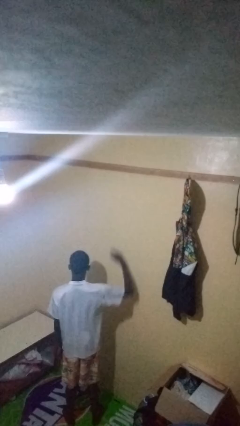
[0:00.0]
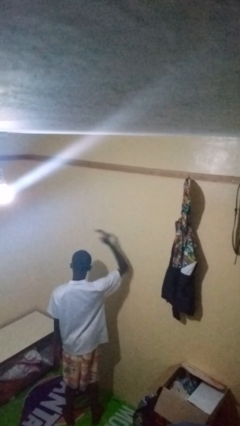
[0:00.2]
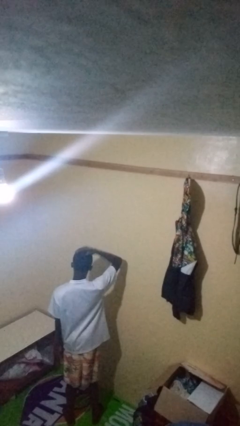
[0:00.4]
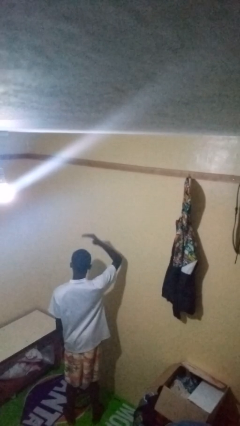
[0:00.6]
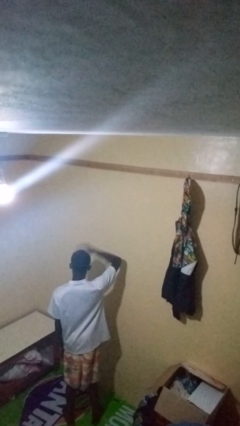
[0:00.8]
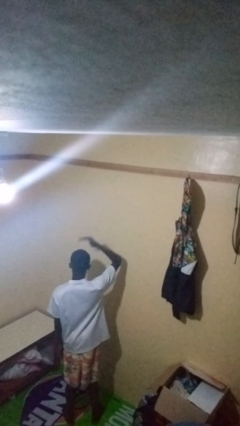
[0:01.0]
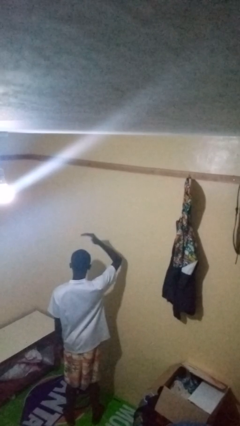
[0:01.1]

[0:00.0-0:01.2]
person pats head

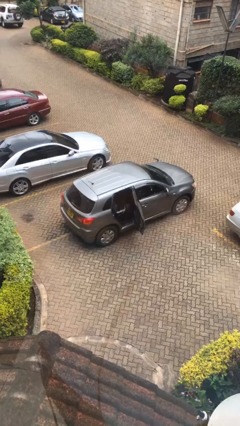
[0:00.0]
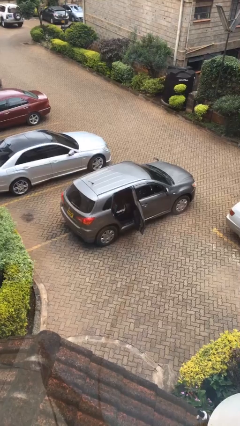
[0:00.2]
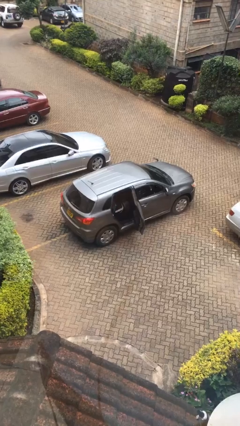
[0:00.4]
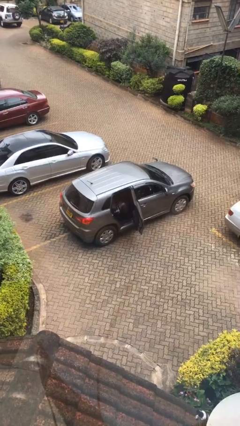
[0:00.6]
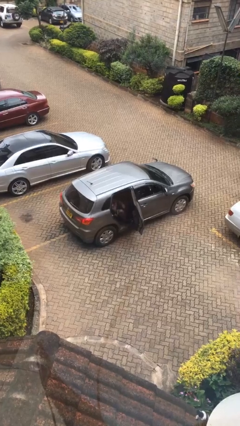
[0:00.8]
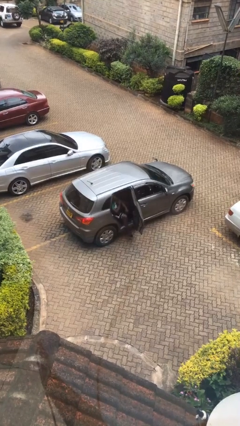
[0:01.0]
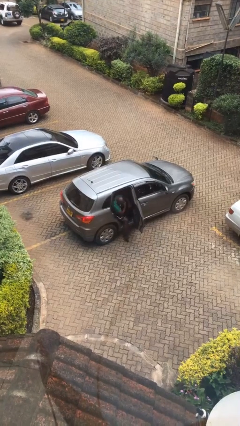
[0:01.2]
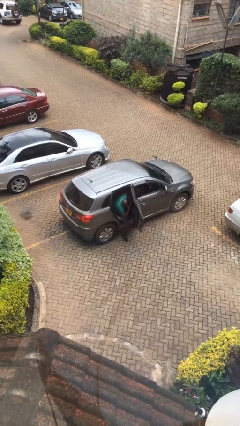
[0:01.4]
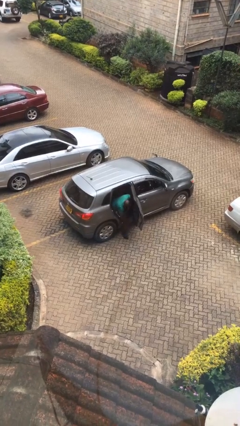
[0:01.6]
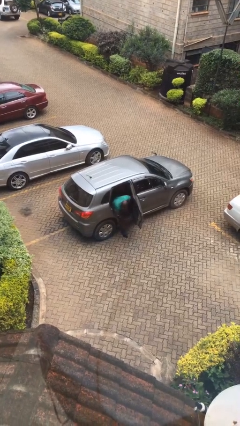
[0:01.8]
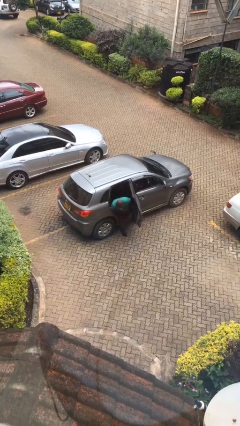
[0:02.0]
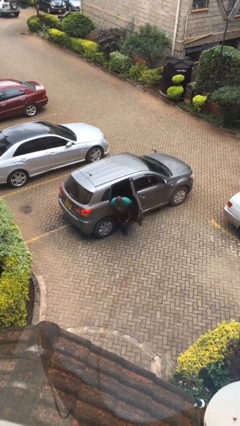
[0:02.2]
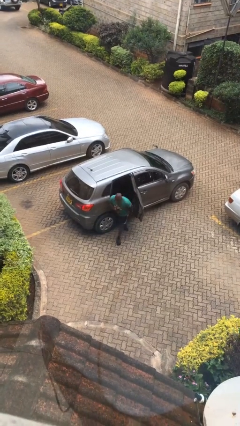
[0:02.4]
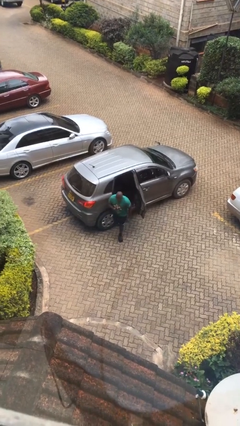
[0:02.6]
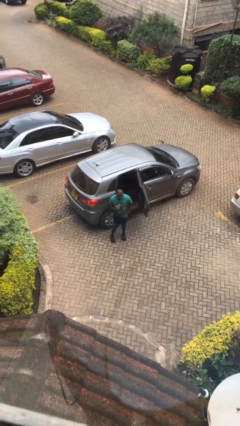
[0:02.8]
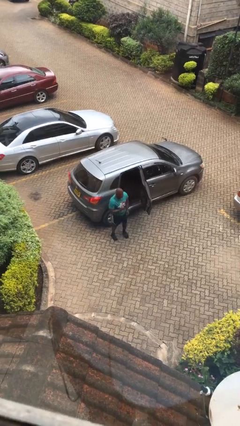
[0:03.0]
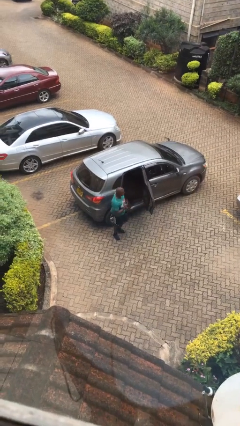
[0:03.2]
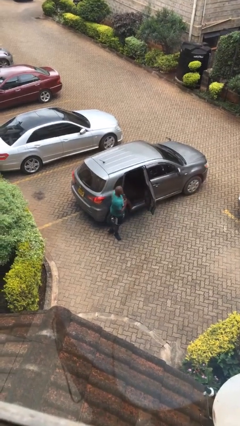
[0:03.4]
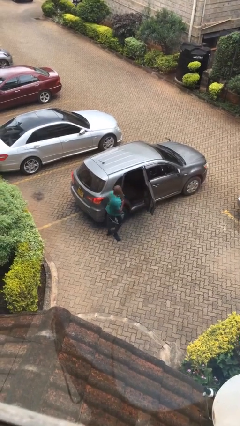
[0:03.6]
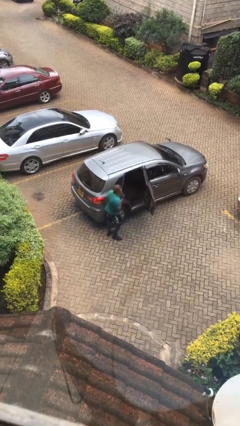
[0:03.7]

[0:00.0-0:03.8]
person exits car

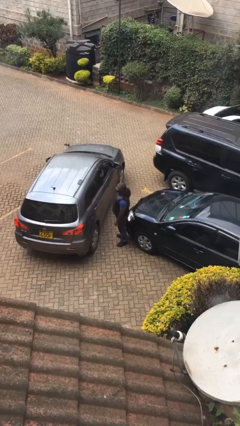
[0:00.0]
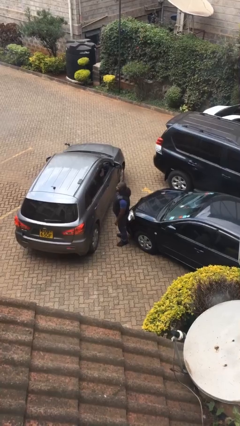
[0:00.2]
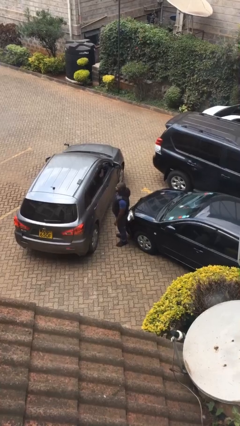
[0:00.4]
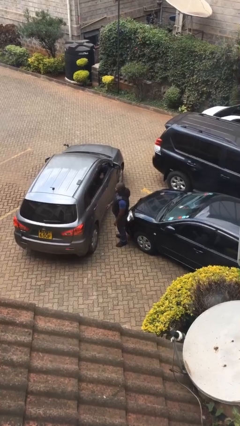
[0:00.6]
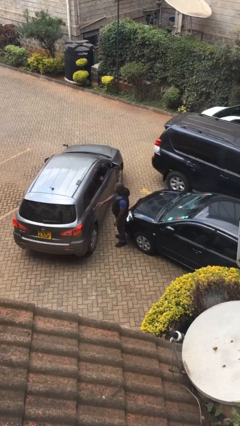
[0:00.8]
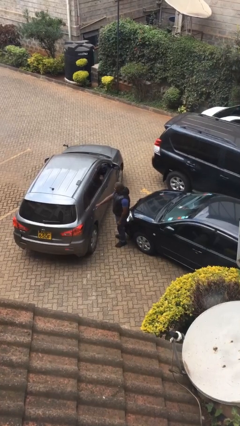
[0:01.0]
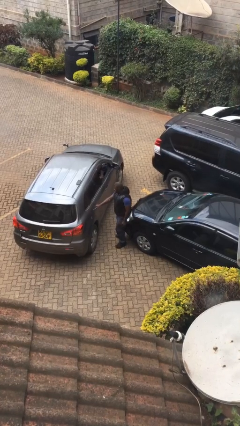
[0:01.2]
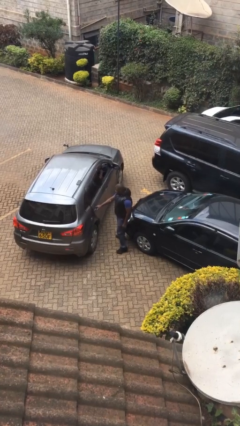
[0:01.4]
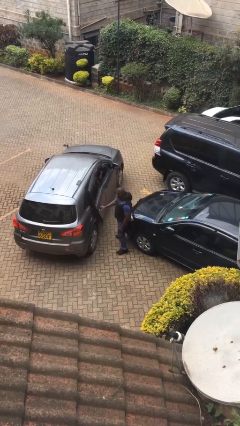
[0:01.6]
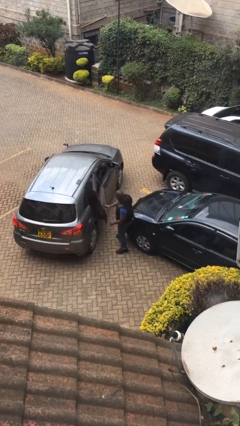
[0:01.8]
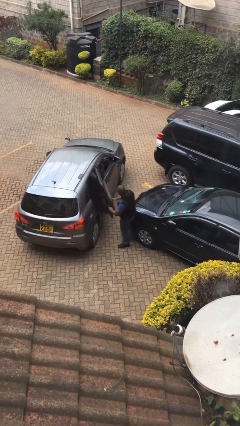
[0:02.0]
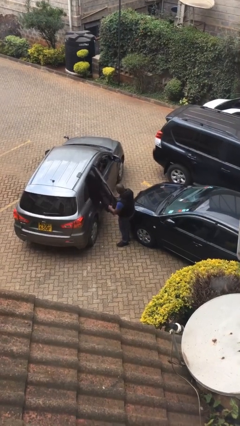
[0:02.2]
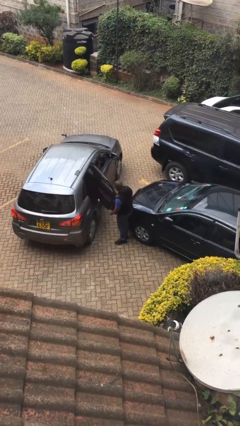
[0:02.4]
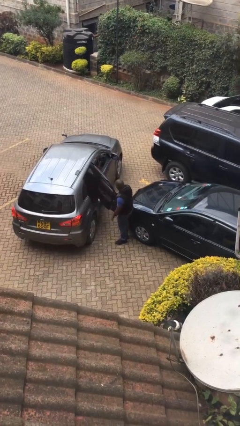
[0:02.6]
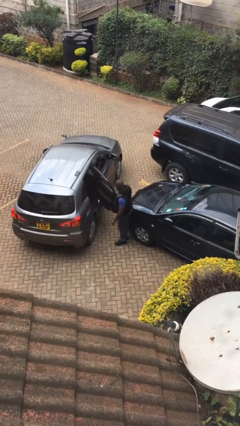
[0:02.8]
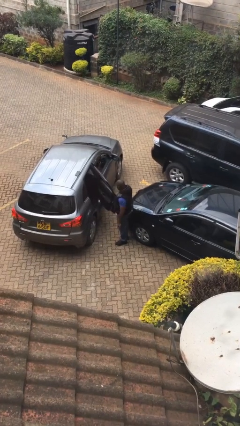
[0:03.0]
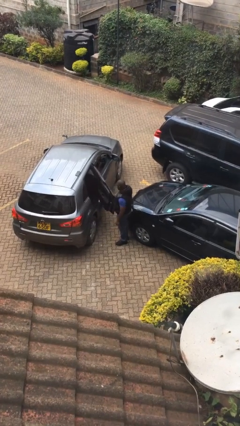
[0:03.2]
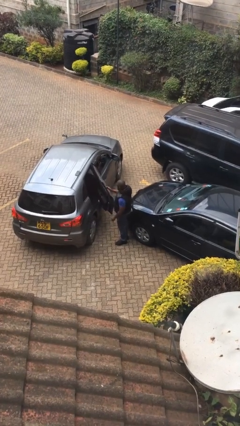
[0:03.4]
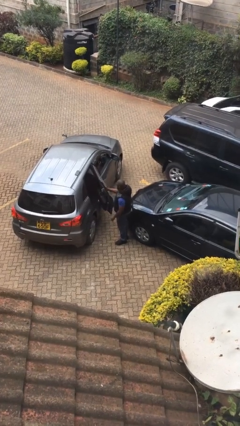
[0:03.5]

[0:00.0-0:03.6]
person opens car door

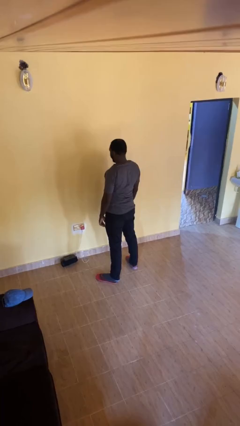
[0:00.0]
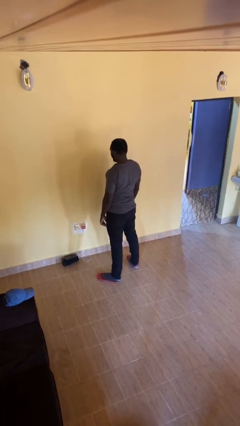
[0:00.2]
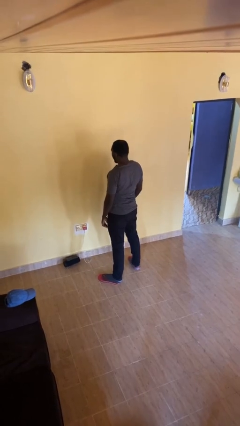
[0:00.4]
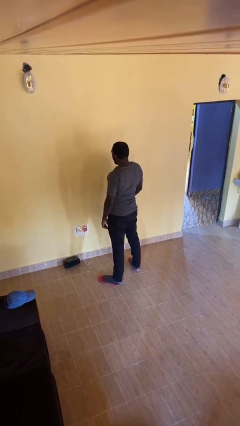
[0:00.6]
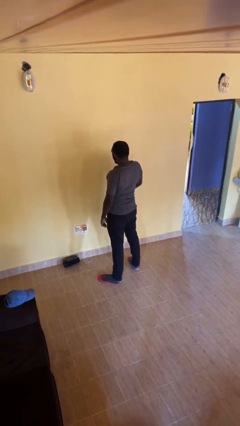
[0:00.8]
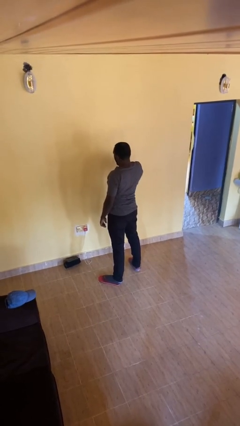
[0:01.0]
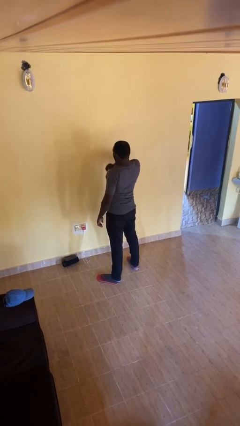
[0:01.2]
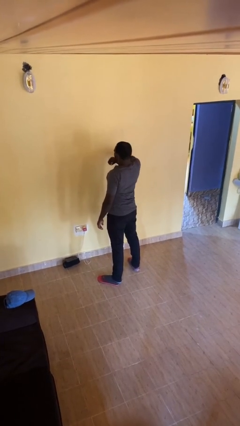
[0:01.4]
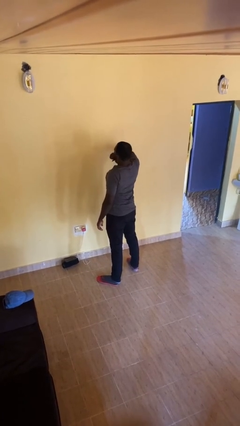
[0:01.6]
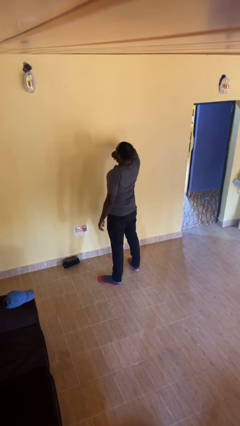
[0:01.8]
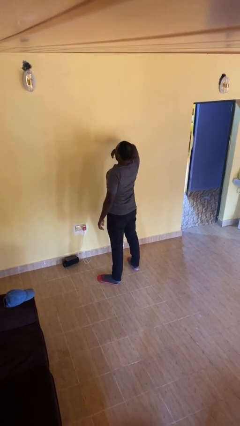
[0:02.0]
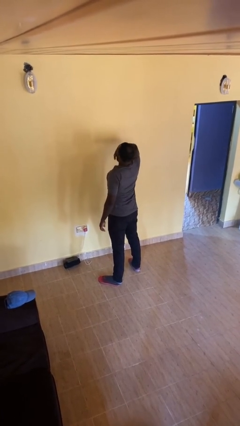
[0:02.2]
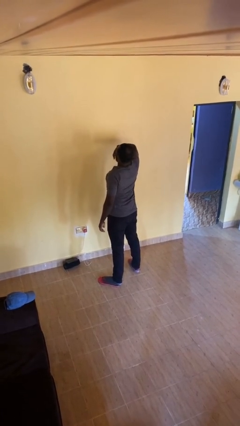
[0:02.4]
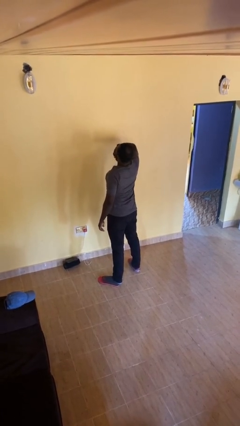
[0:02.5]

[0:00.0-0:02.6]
person yawns

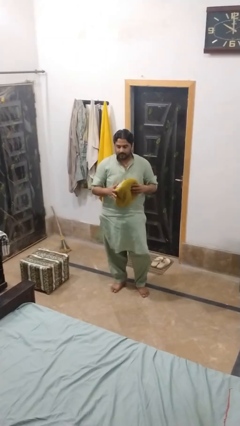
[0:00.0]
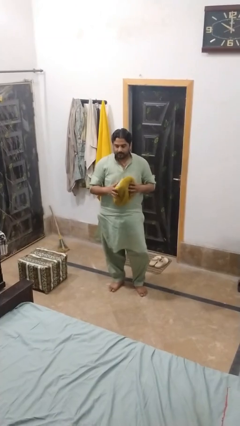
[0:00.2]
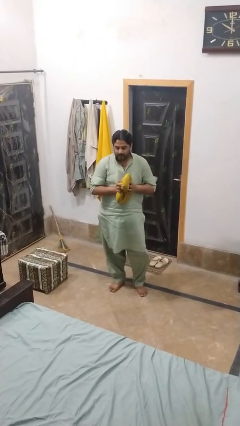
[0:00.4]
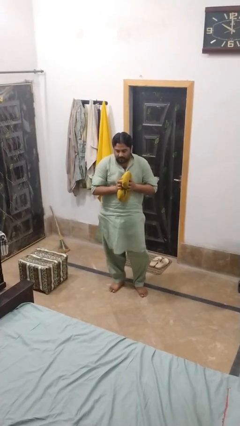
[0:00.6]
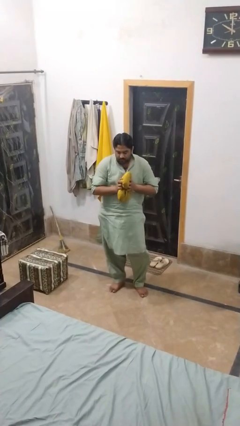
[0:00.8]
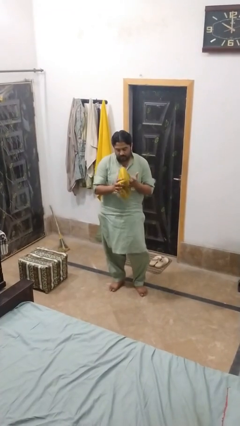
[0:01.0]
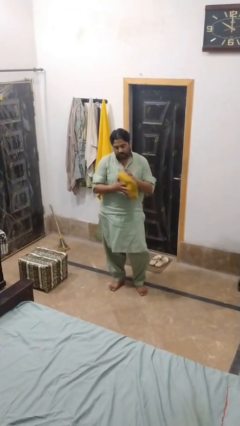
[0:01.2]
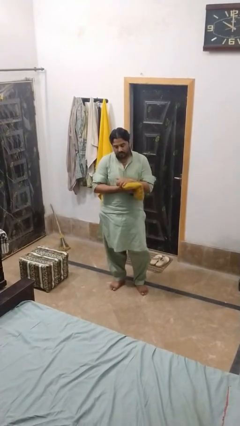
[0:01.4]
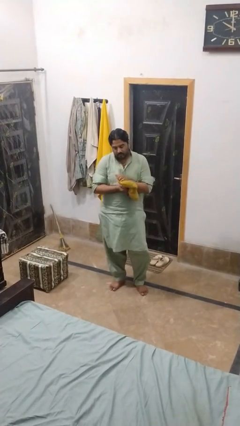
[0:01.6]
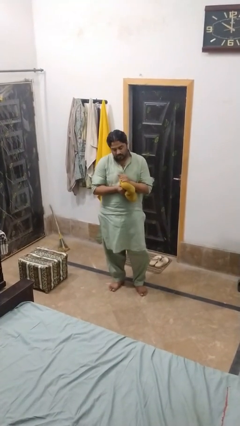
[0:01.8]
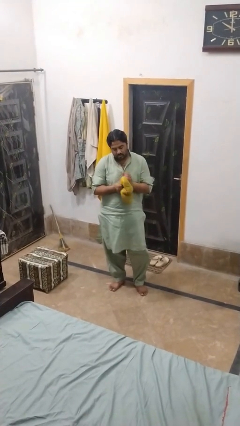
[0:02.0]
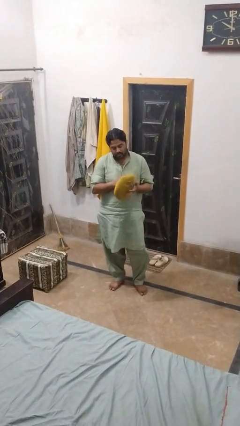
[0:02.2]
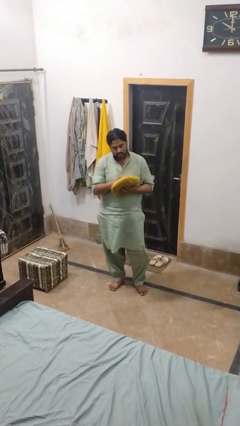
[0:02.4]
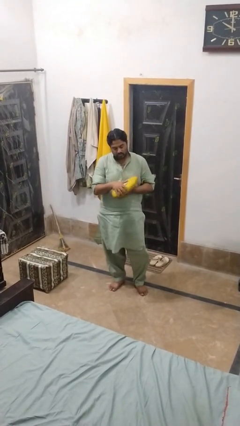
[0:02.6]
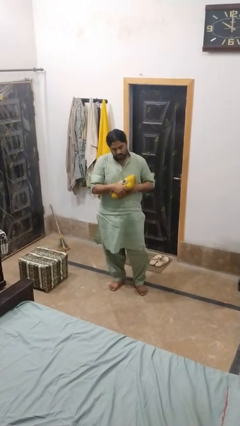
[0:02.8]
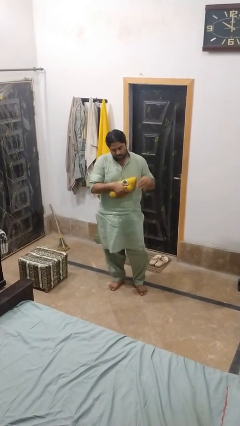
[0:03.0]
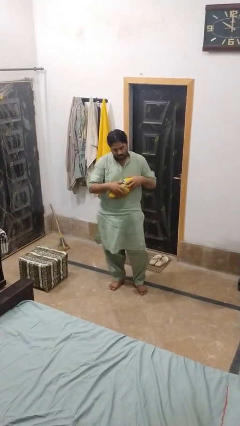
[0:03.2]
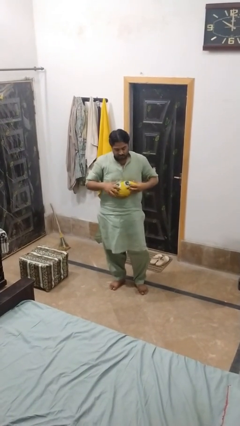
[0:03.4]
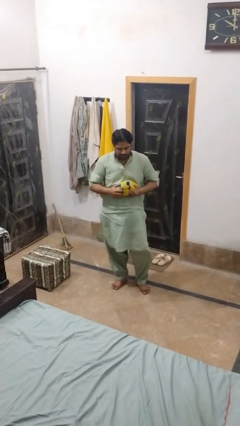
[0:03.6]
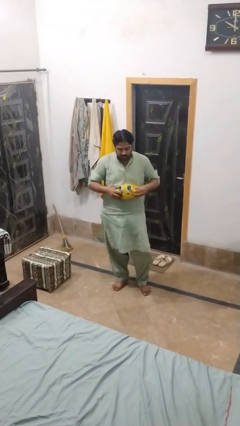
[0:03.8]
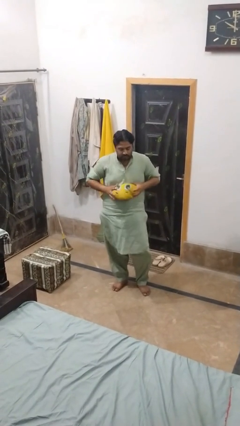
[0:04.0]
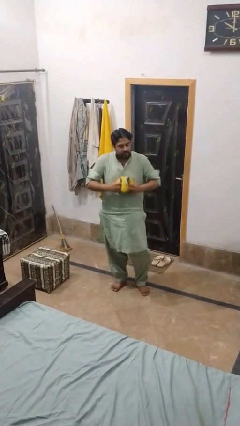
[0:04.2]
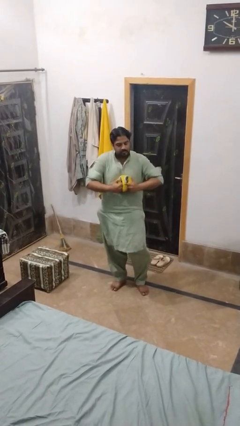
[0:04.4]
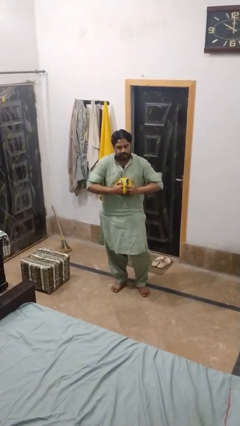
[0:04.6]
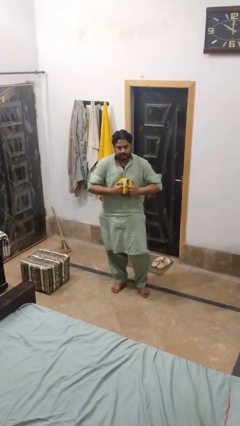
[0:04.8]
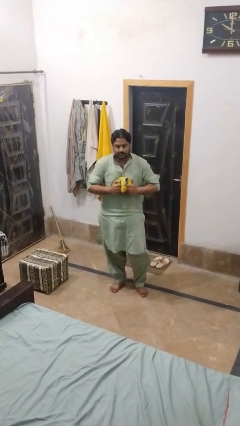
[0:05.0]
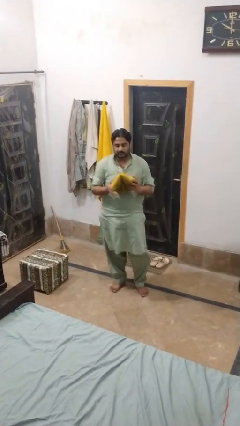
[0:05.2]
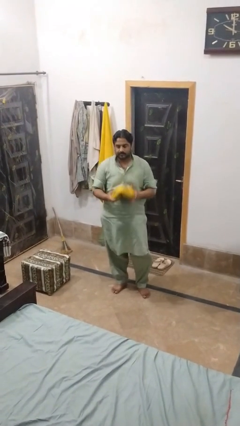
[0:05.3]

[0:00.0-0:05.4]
person squeezes object

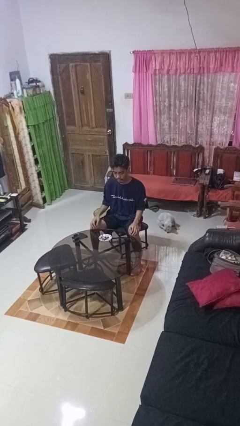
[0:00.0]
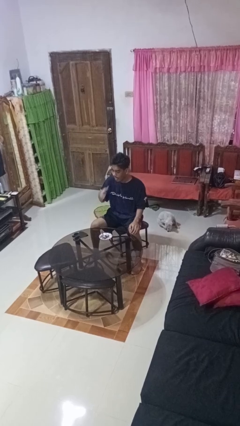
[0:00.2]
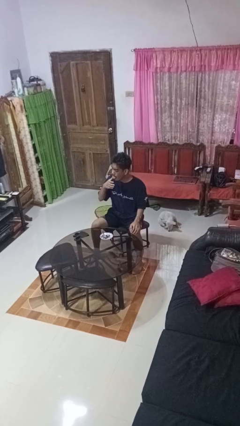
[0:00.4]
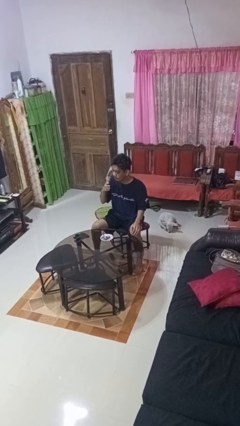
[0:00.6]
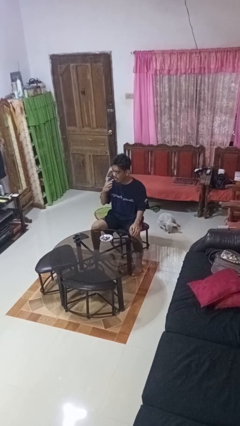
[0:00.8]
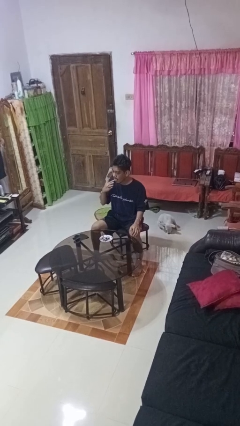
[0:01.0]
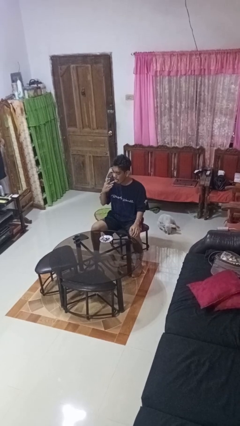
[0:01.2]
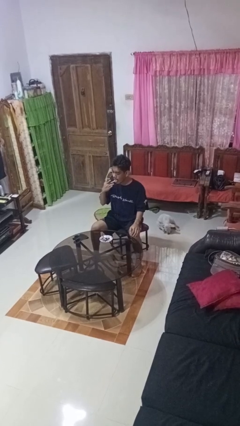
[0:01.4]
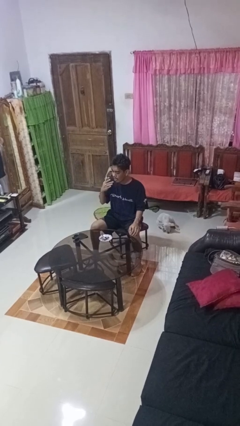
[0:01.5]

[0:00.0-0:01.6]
person licks fingers
